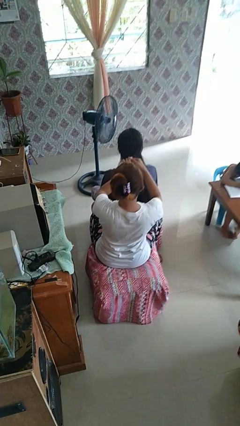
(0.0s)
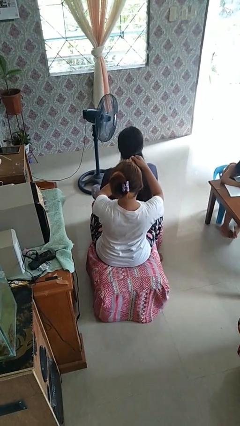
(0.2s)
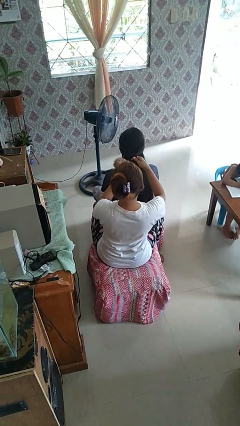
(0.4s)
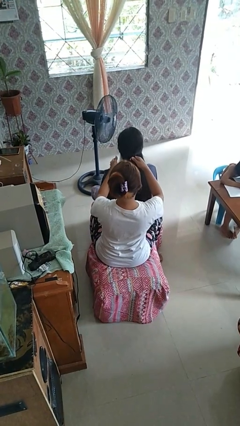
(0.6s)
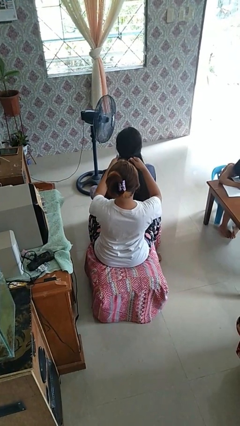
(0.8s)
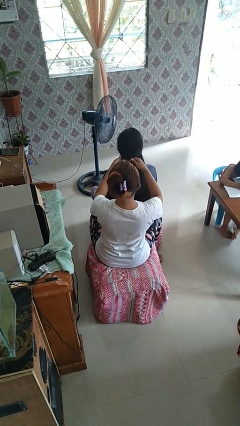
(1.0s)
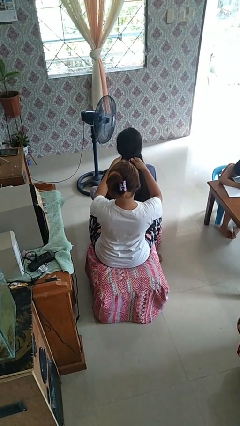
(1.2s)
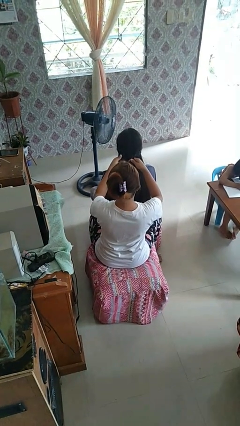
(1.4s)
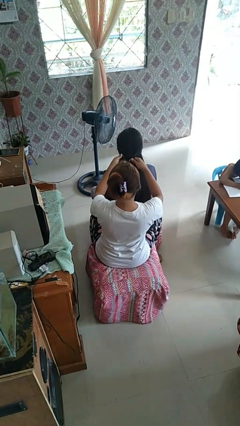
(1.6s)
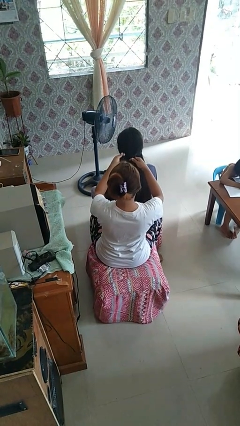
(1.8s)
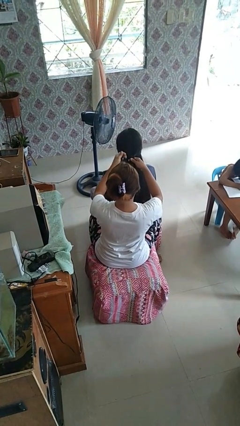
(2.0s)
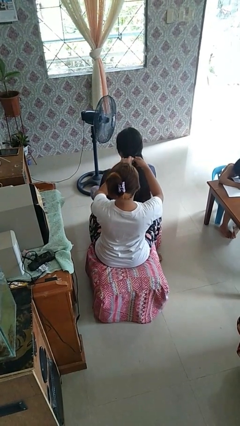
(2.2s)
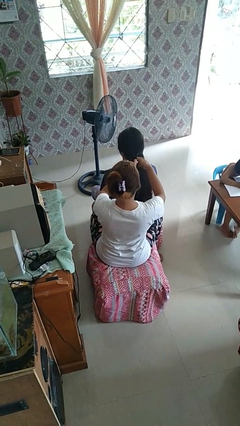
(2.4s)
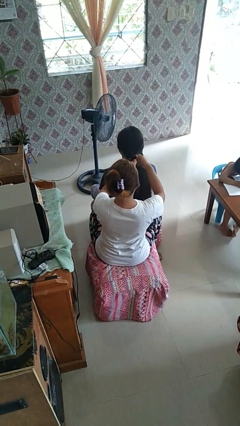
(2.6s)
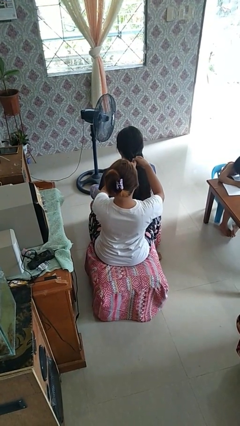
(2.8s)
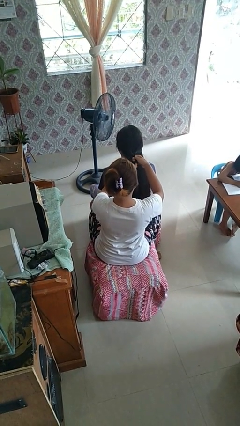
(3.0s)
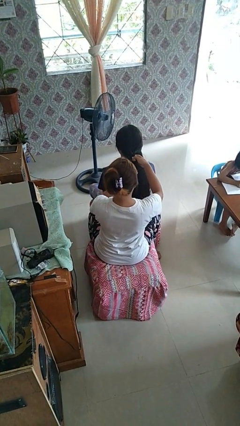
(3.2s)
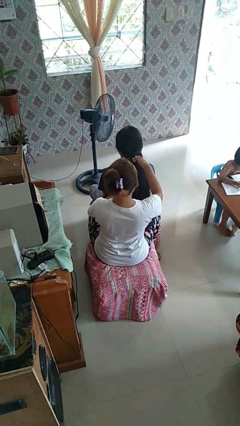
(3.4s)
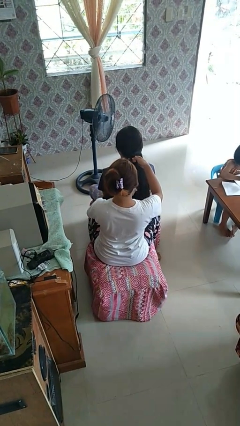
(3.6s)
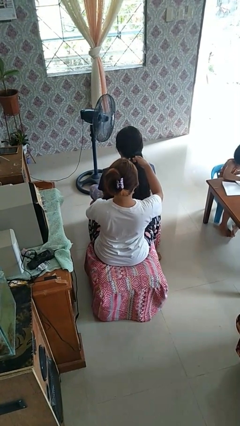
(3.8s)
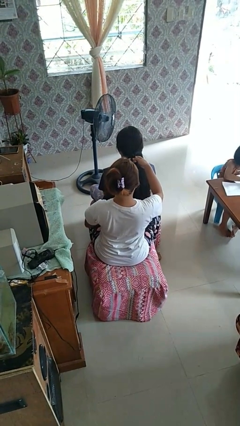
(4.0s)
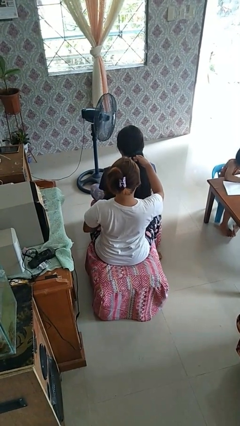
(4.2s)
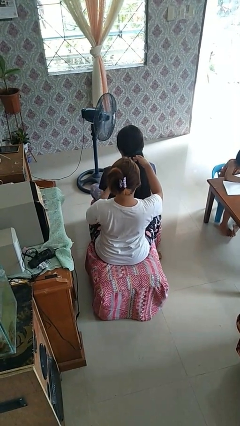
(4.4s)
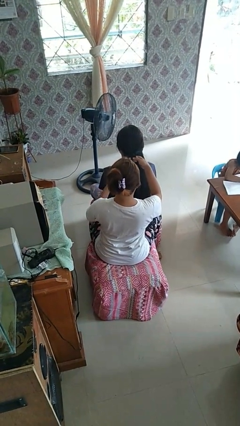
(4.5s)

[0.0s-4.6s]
person braids hair of person

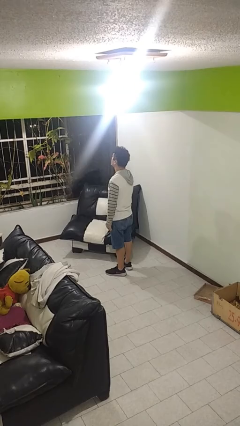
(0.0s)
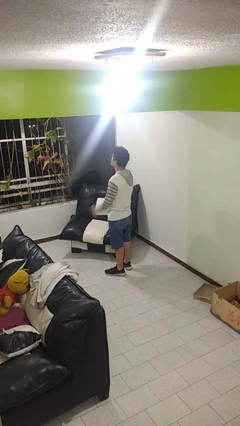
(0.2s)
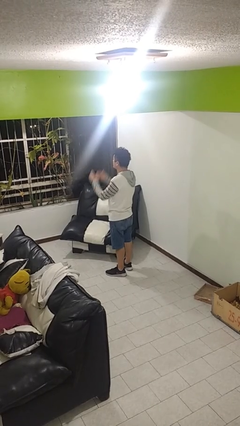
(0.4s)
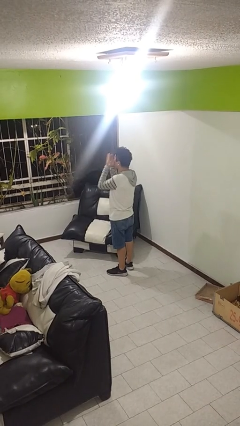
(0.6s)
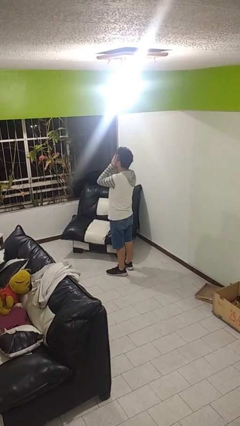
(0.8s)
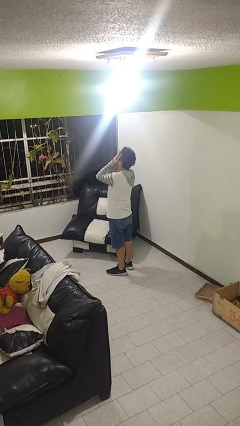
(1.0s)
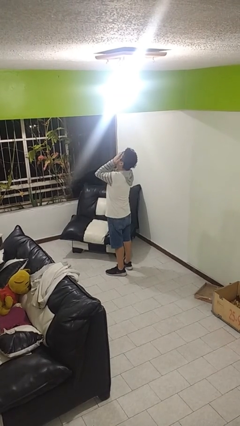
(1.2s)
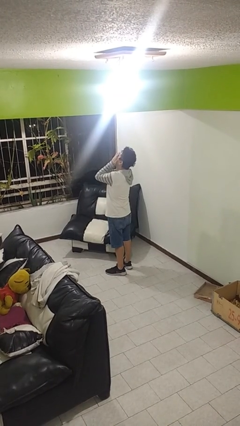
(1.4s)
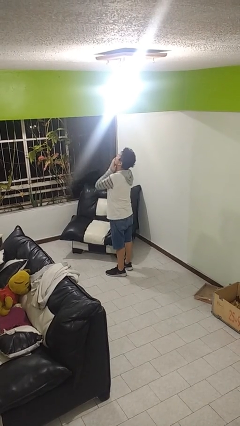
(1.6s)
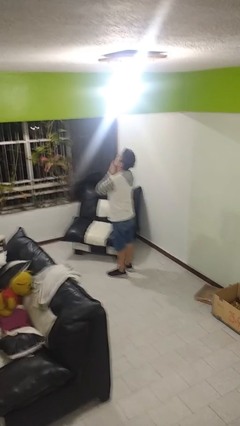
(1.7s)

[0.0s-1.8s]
person covers face with hands

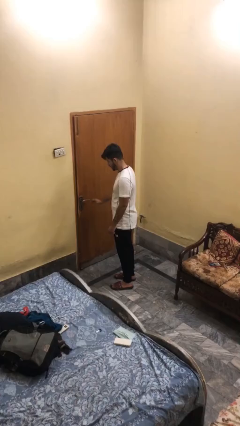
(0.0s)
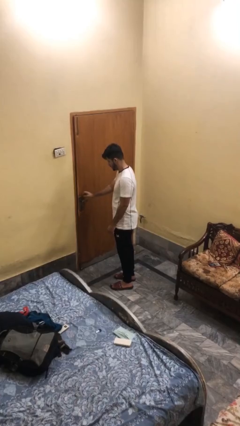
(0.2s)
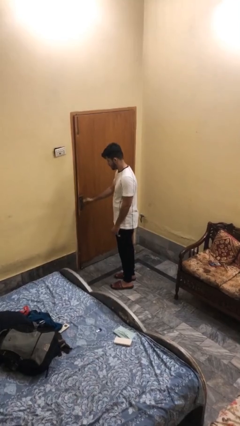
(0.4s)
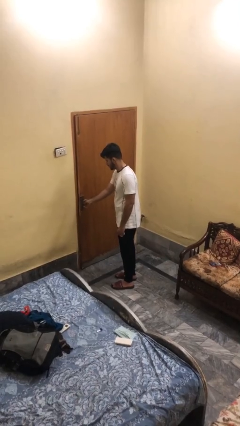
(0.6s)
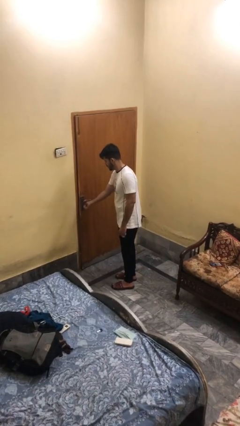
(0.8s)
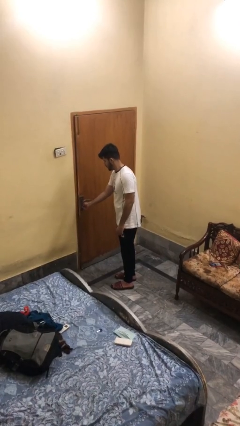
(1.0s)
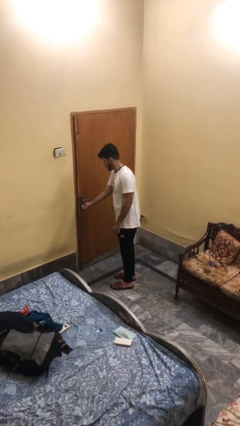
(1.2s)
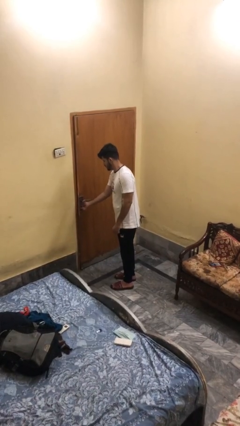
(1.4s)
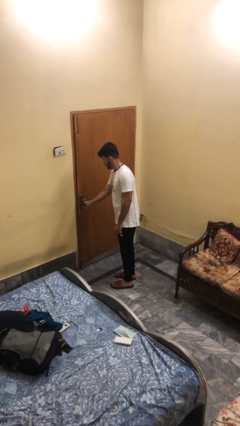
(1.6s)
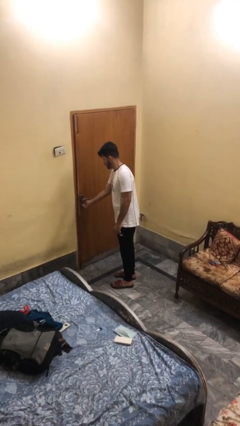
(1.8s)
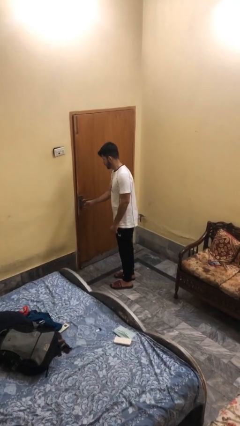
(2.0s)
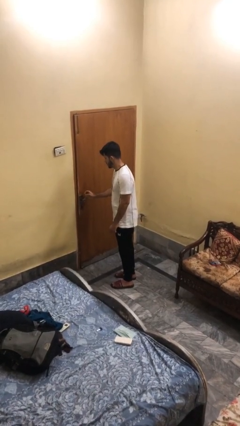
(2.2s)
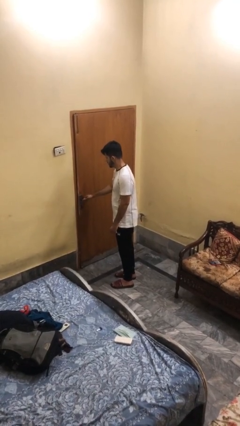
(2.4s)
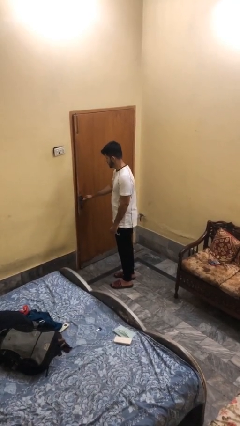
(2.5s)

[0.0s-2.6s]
person unlocks door with keys

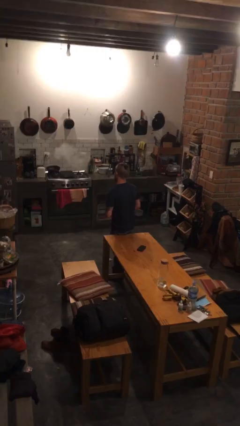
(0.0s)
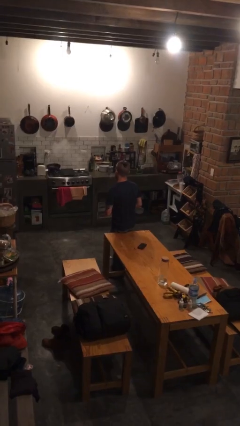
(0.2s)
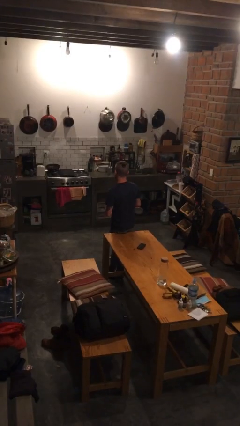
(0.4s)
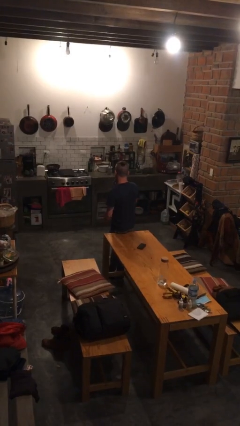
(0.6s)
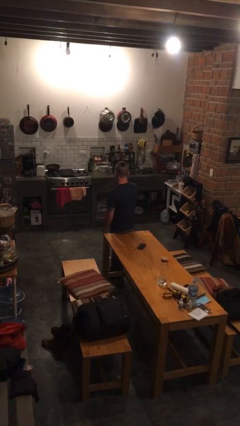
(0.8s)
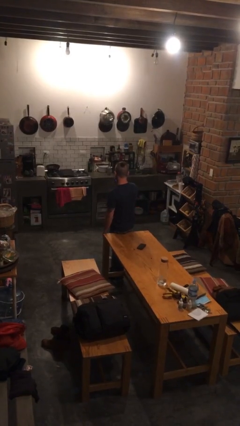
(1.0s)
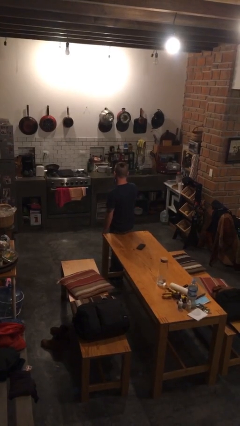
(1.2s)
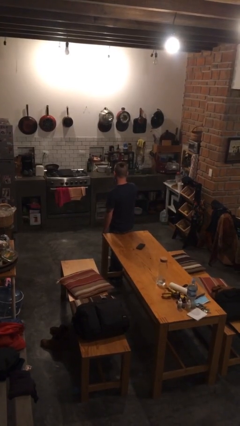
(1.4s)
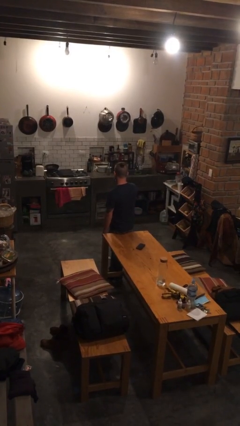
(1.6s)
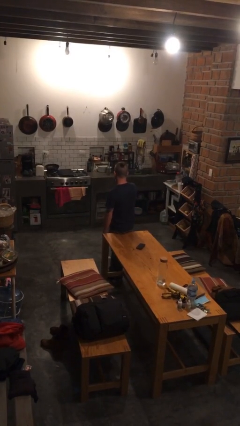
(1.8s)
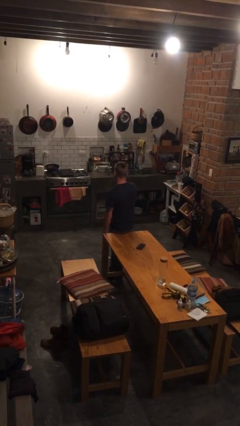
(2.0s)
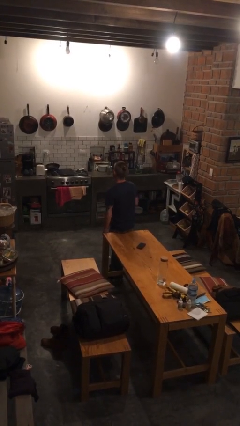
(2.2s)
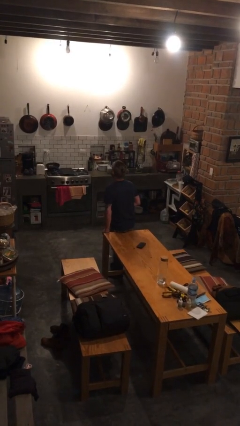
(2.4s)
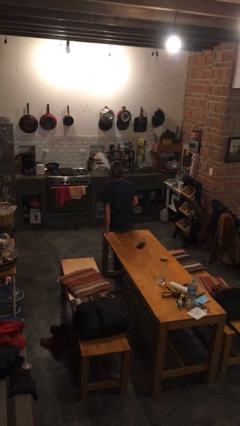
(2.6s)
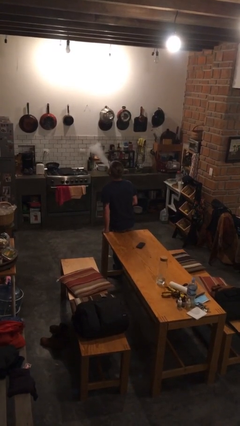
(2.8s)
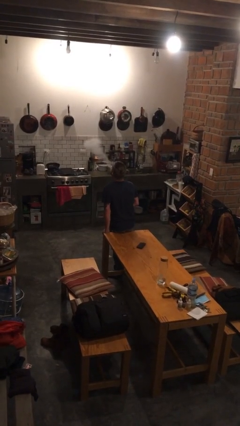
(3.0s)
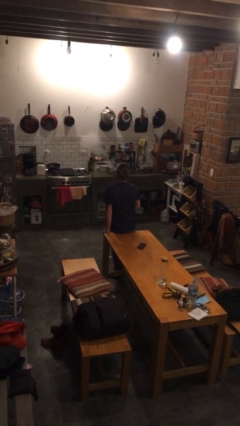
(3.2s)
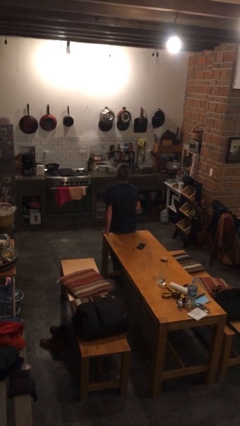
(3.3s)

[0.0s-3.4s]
person vapes

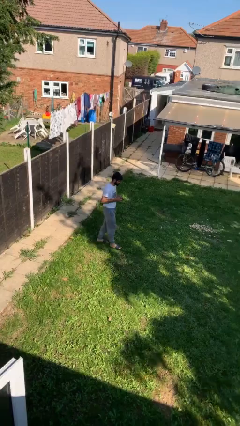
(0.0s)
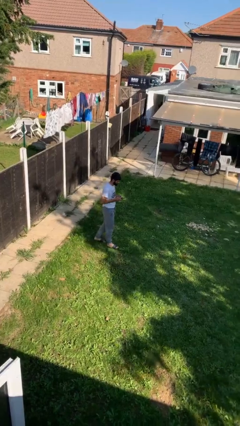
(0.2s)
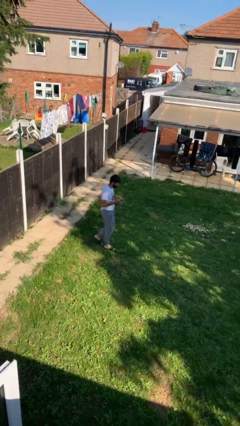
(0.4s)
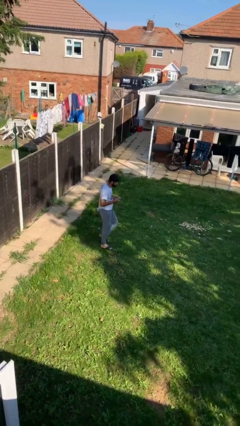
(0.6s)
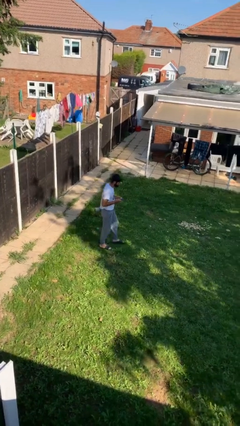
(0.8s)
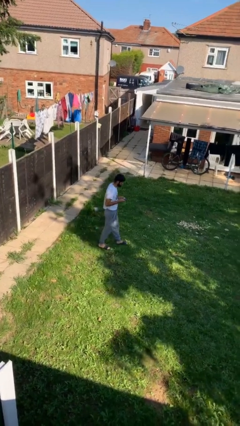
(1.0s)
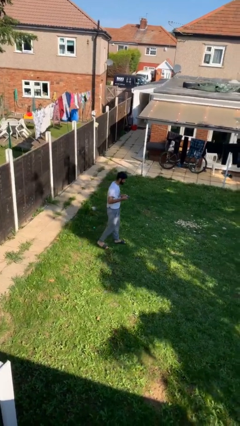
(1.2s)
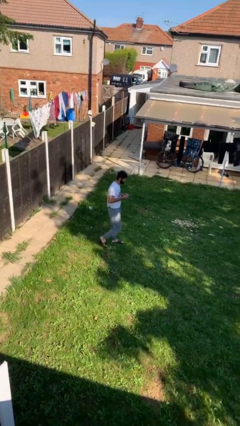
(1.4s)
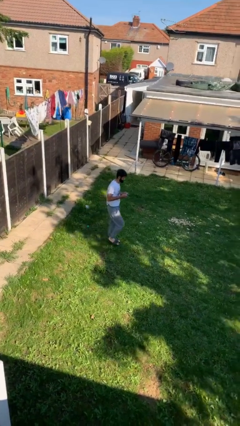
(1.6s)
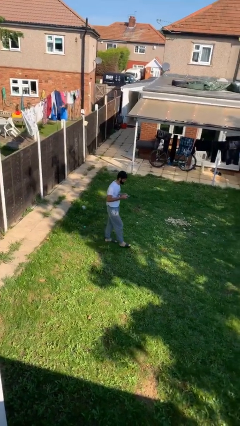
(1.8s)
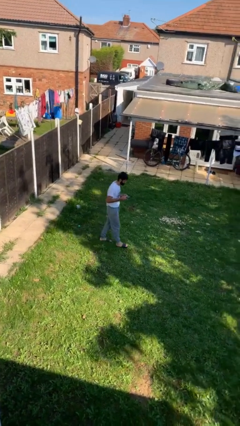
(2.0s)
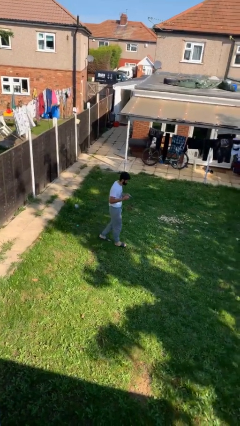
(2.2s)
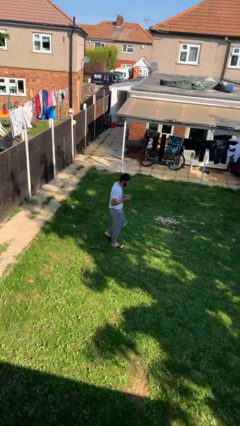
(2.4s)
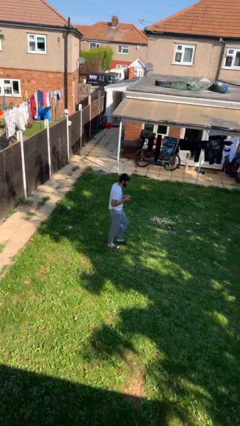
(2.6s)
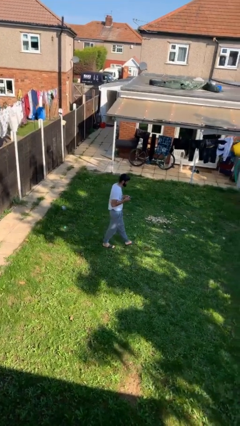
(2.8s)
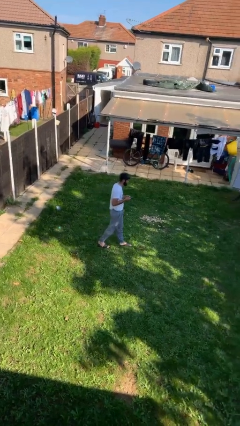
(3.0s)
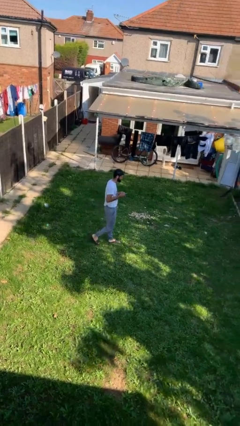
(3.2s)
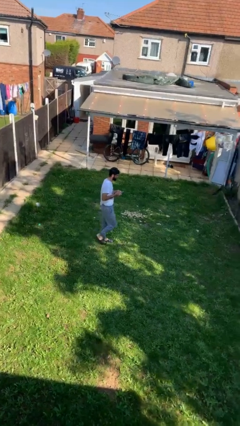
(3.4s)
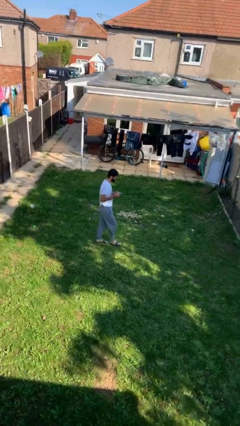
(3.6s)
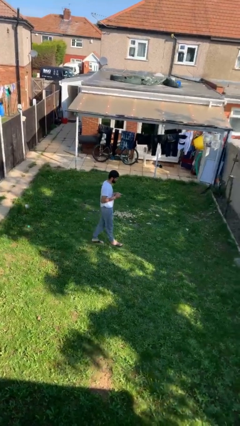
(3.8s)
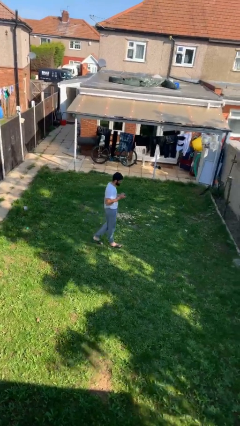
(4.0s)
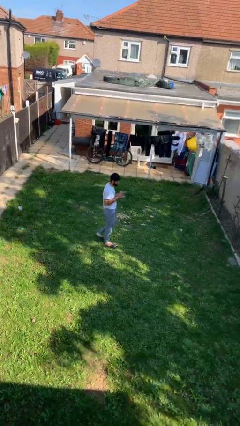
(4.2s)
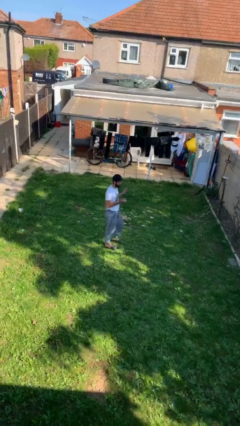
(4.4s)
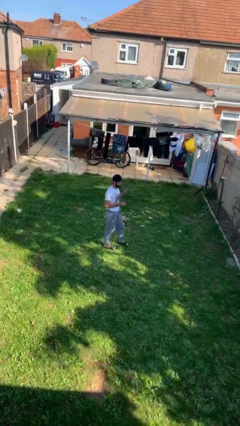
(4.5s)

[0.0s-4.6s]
person texts on phone

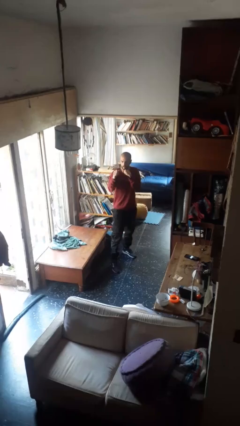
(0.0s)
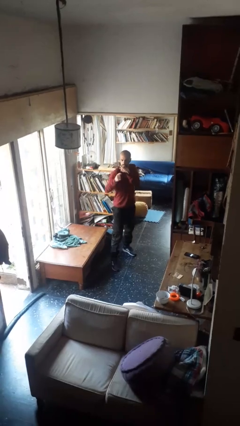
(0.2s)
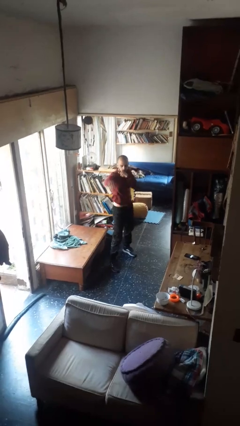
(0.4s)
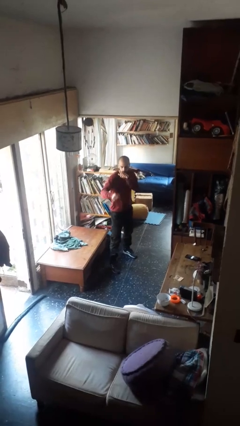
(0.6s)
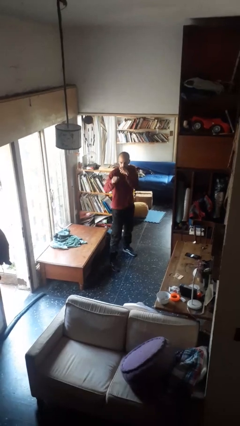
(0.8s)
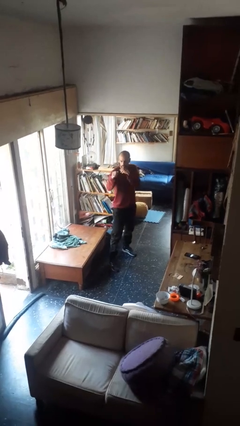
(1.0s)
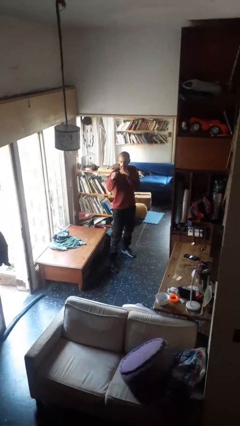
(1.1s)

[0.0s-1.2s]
person punches
